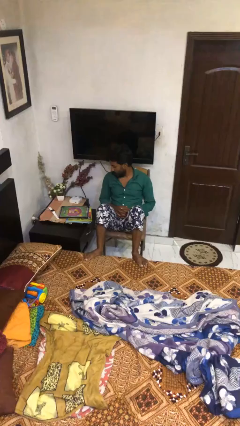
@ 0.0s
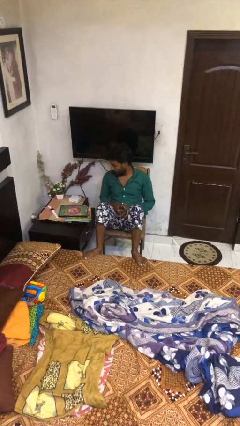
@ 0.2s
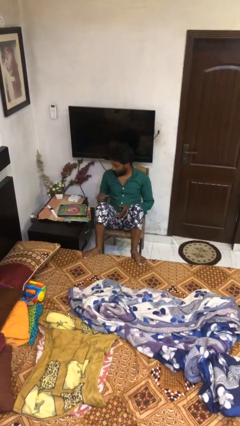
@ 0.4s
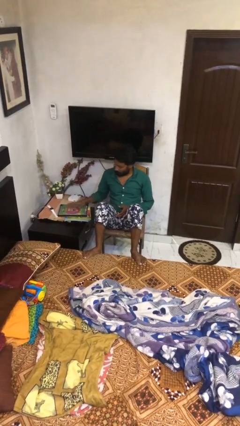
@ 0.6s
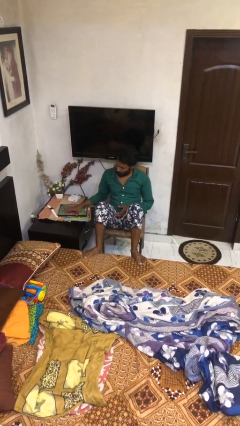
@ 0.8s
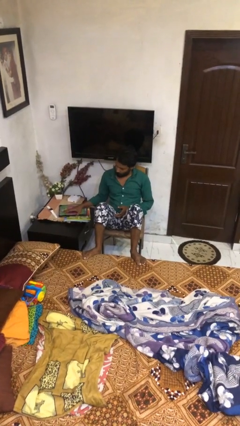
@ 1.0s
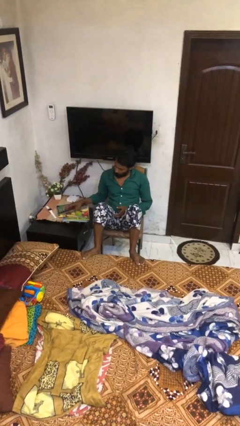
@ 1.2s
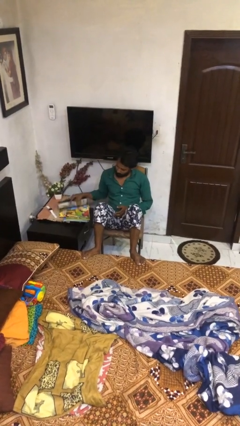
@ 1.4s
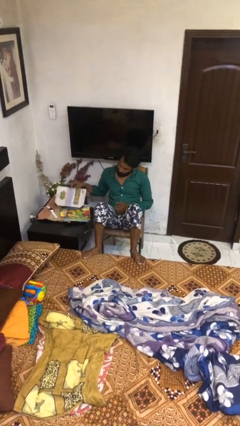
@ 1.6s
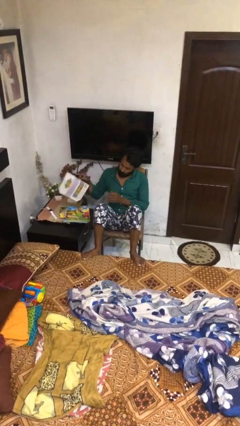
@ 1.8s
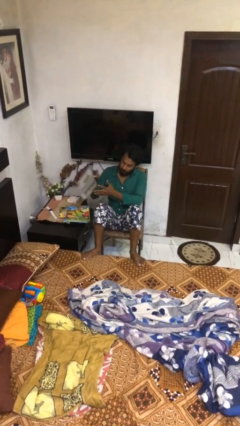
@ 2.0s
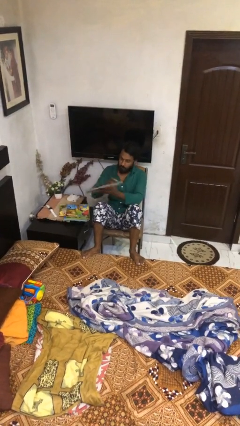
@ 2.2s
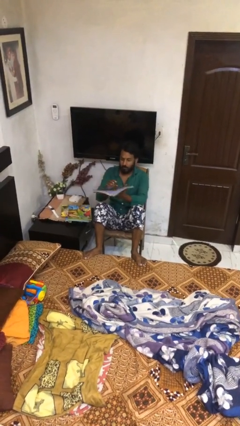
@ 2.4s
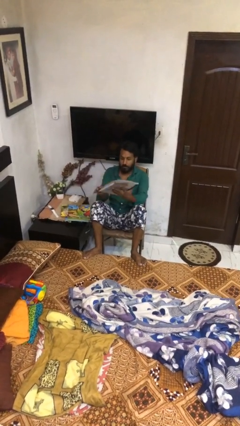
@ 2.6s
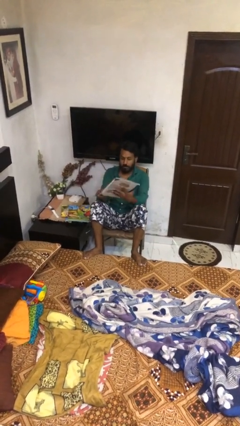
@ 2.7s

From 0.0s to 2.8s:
person picks up object from table

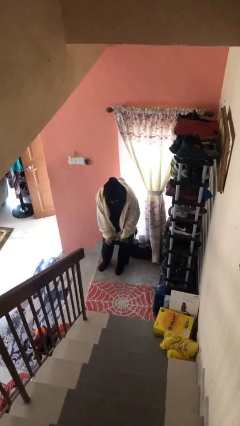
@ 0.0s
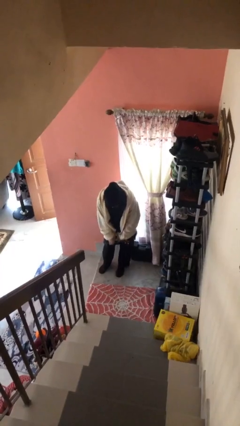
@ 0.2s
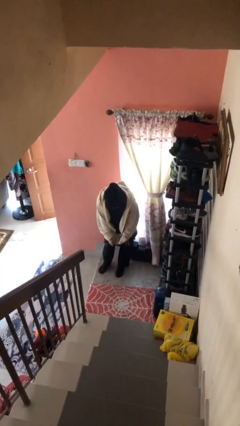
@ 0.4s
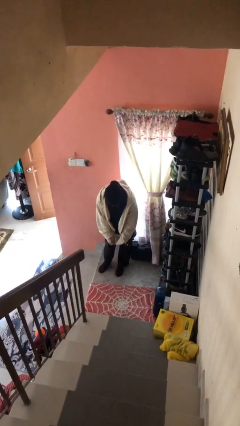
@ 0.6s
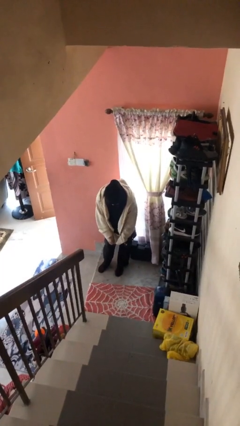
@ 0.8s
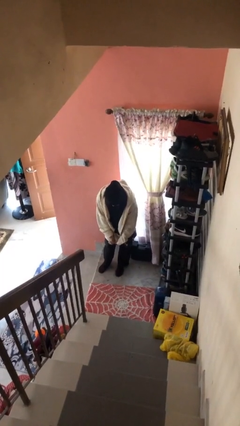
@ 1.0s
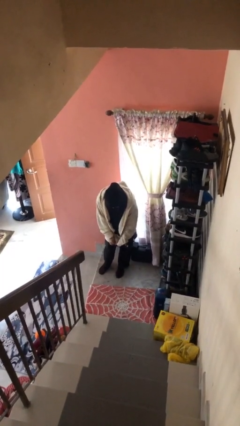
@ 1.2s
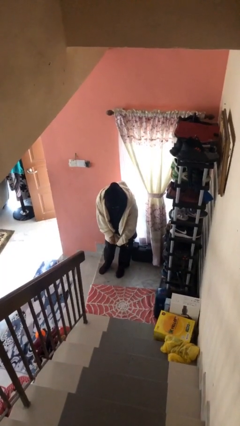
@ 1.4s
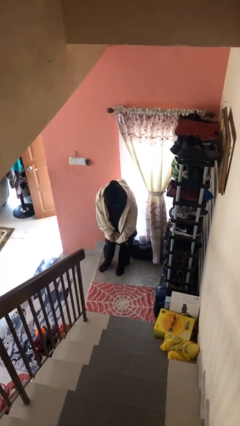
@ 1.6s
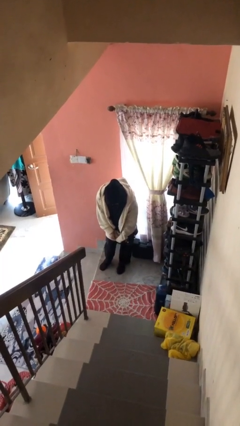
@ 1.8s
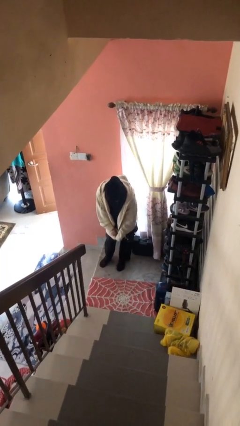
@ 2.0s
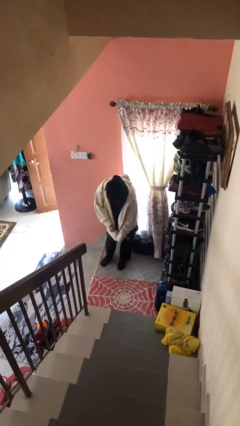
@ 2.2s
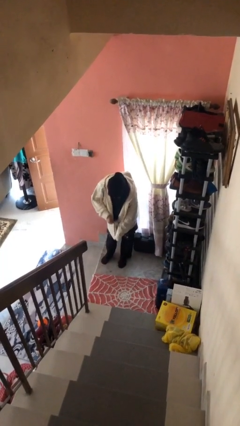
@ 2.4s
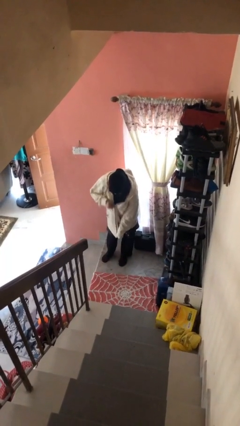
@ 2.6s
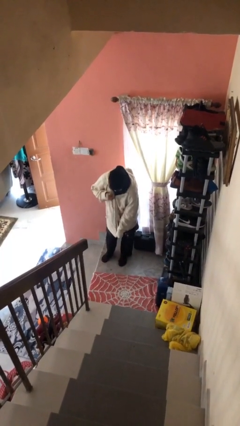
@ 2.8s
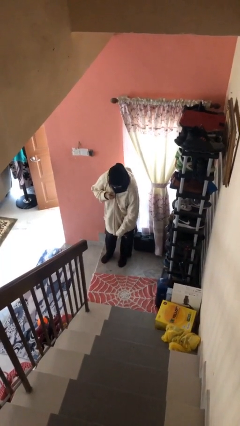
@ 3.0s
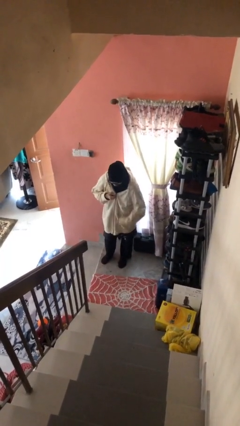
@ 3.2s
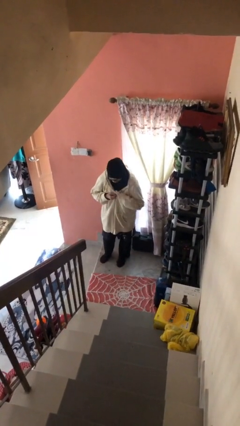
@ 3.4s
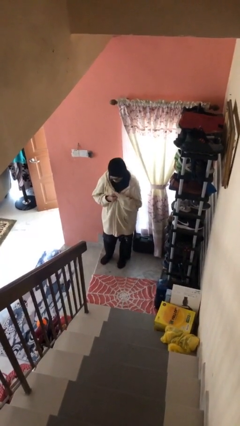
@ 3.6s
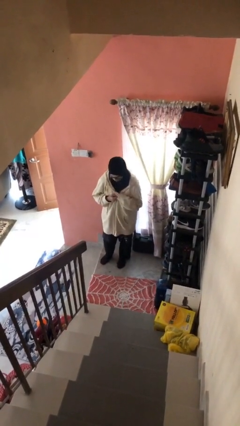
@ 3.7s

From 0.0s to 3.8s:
person zips up jacket

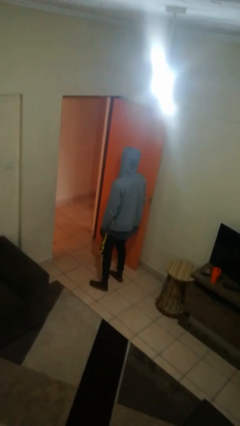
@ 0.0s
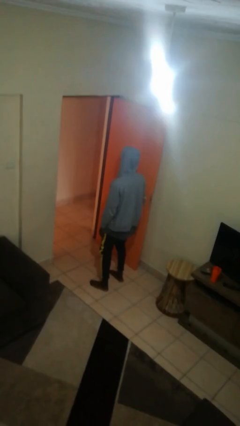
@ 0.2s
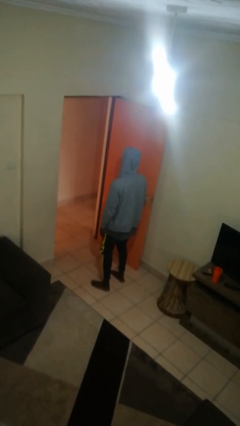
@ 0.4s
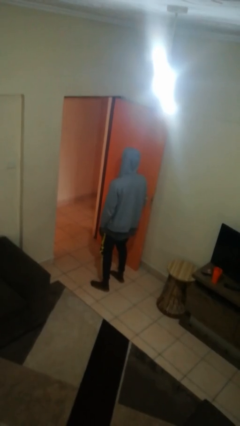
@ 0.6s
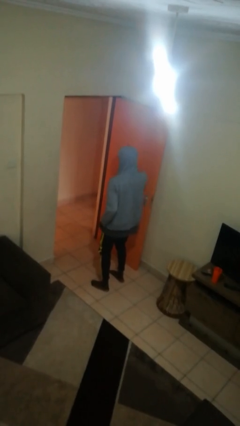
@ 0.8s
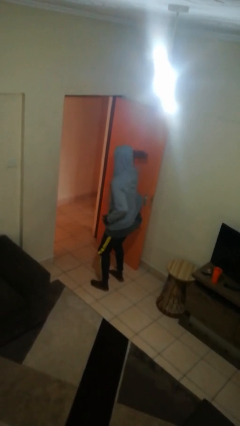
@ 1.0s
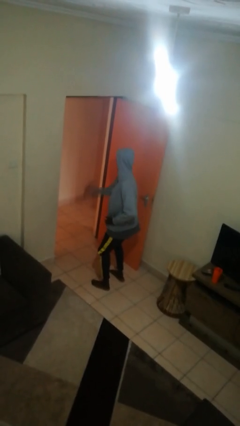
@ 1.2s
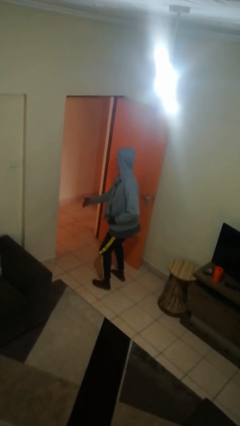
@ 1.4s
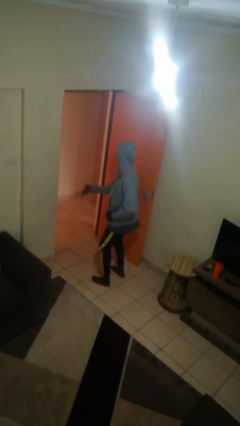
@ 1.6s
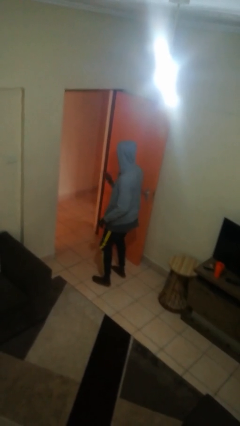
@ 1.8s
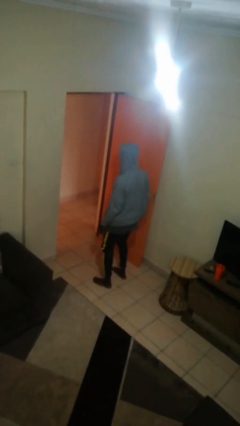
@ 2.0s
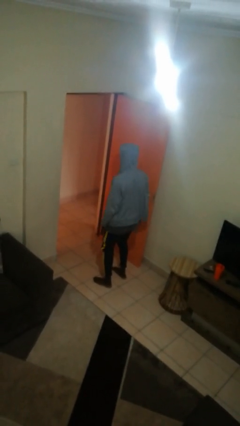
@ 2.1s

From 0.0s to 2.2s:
person karate chop

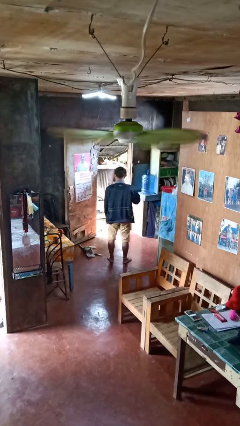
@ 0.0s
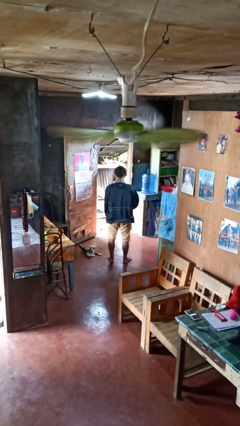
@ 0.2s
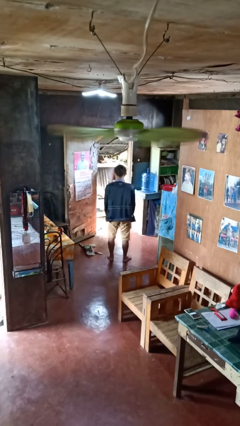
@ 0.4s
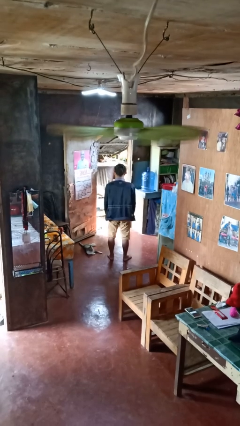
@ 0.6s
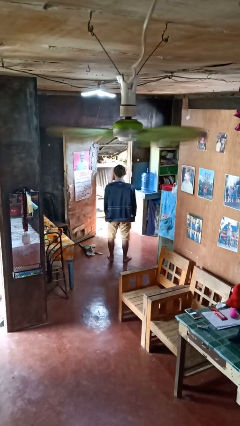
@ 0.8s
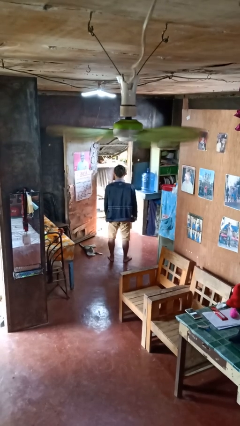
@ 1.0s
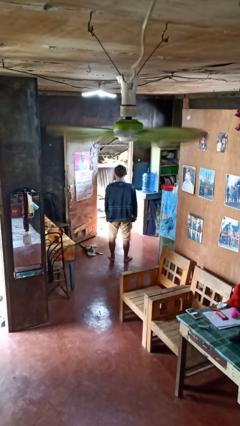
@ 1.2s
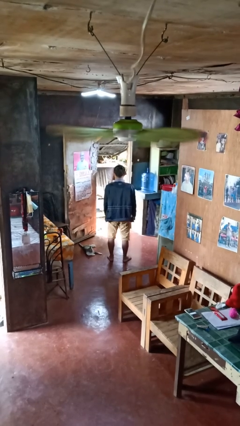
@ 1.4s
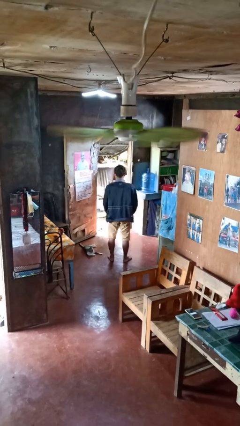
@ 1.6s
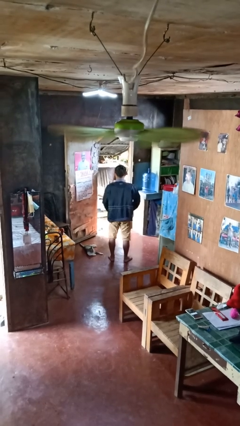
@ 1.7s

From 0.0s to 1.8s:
person unzips jacket

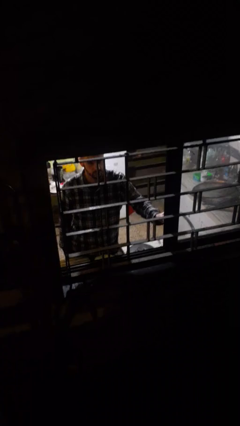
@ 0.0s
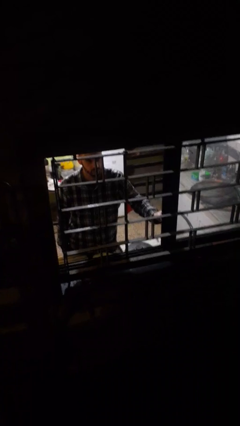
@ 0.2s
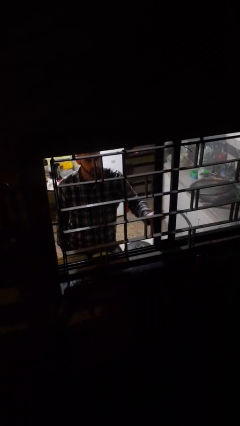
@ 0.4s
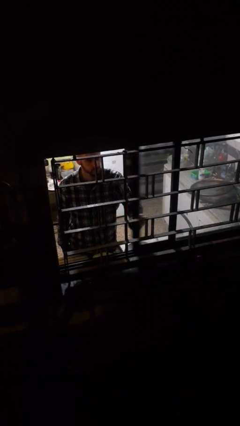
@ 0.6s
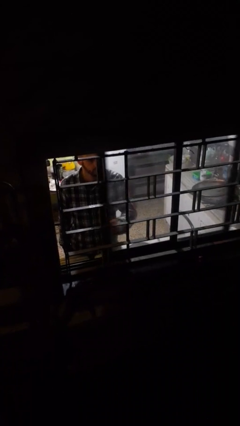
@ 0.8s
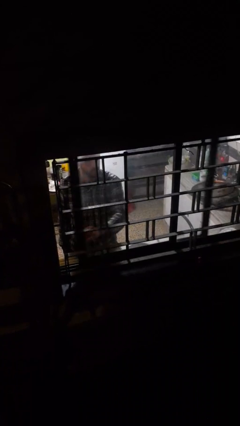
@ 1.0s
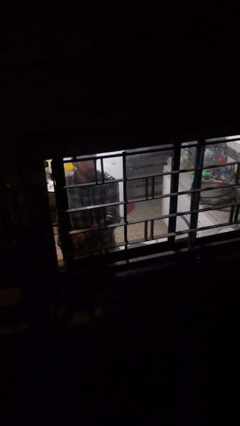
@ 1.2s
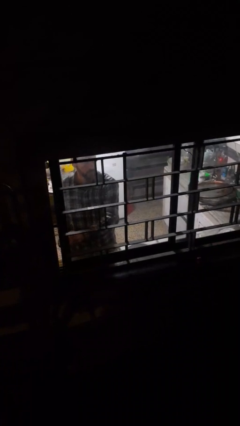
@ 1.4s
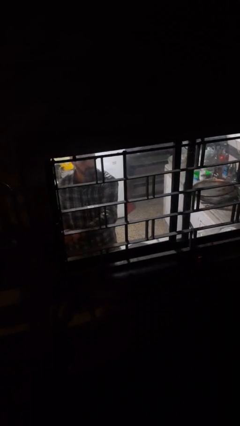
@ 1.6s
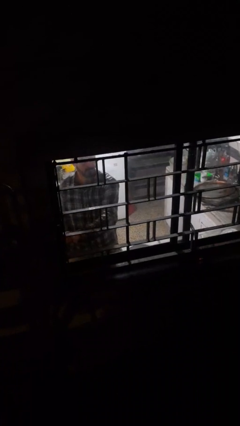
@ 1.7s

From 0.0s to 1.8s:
person closes home window

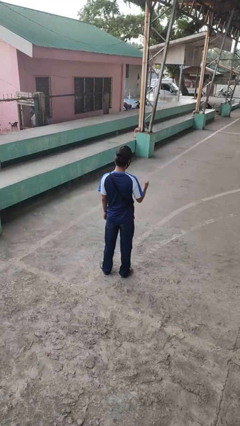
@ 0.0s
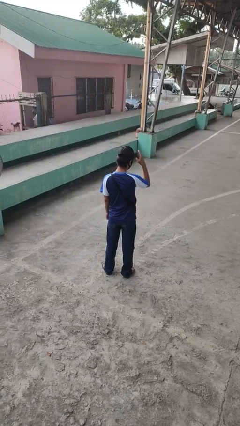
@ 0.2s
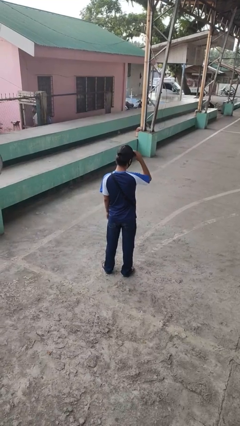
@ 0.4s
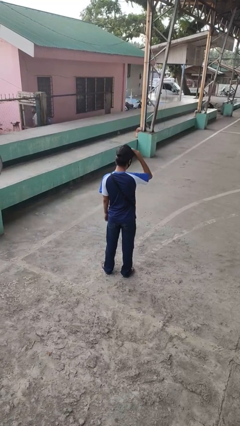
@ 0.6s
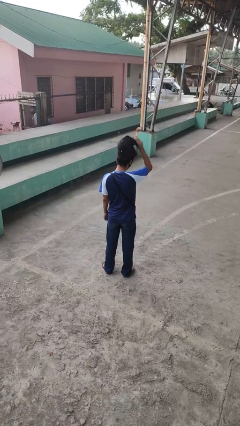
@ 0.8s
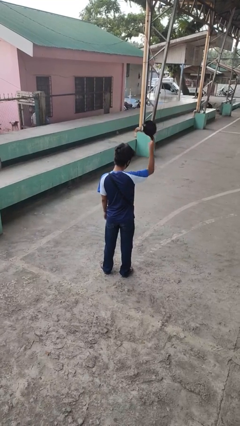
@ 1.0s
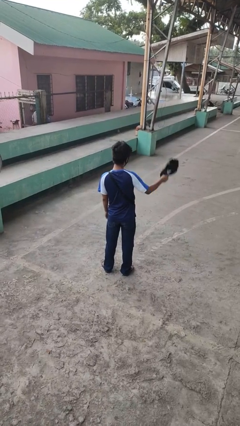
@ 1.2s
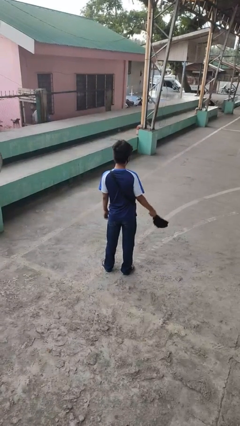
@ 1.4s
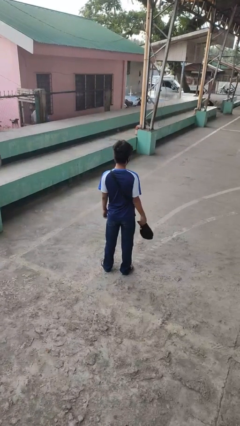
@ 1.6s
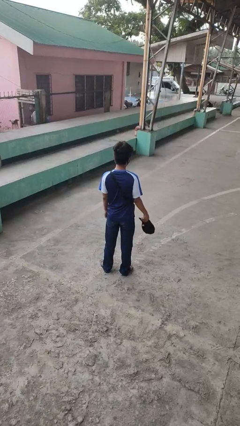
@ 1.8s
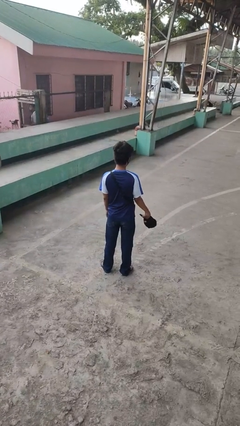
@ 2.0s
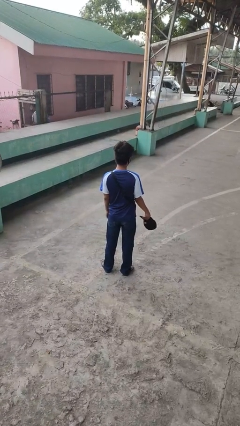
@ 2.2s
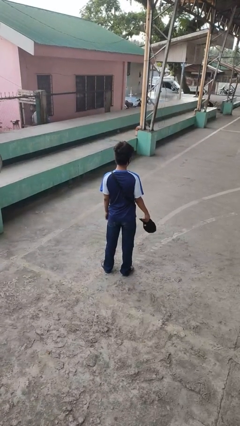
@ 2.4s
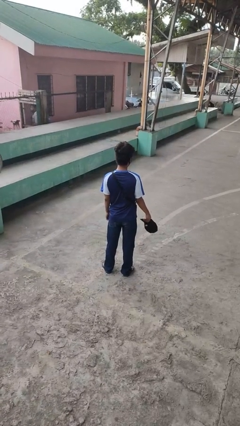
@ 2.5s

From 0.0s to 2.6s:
person takes off hat

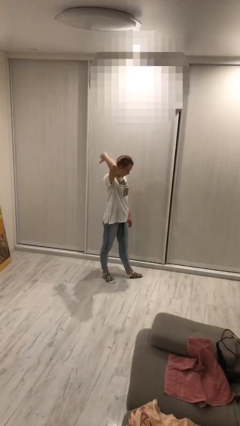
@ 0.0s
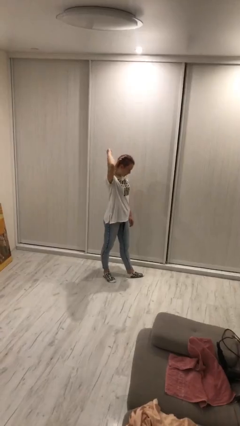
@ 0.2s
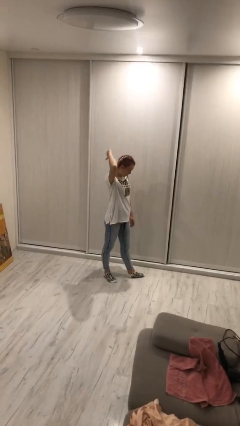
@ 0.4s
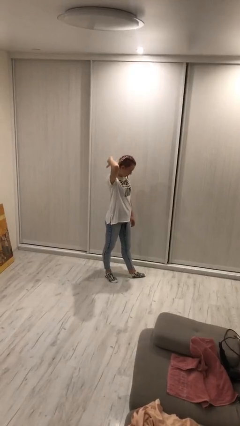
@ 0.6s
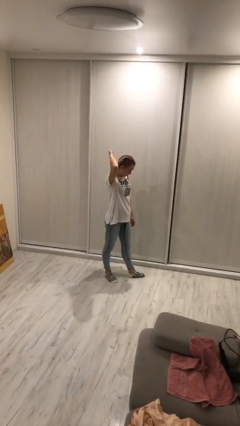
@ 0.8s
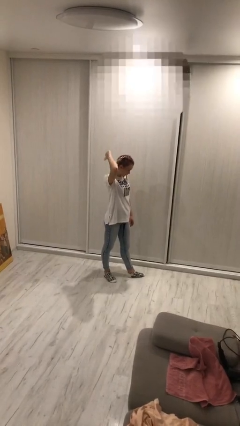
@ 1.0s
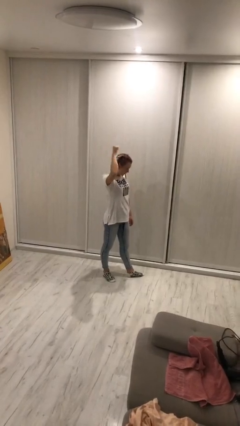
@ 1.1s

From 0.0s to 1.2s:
person gestures behind me

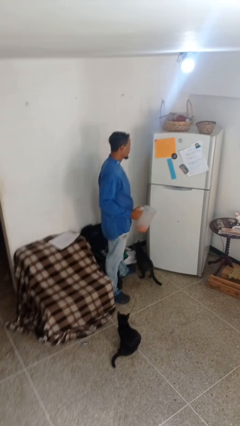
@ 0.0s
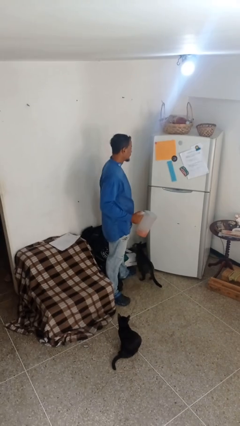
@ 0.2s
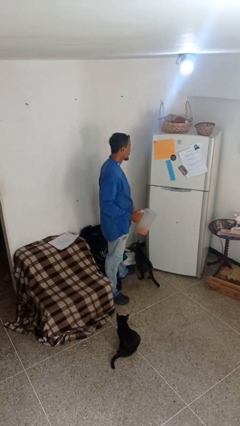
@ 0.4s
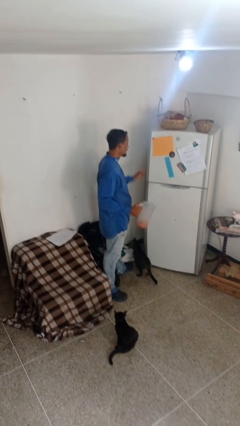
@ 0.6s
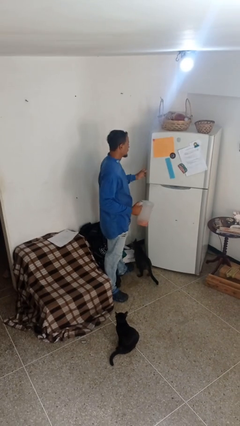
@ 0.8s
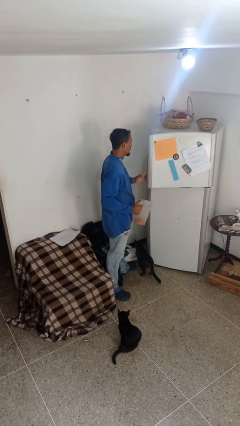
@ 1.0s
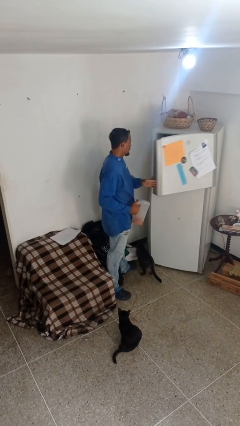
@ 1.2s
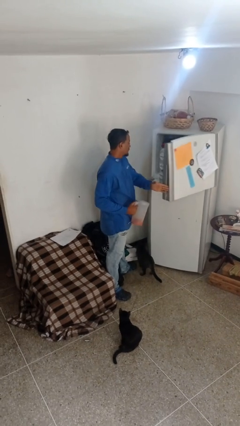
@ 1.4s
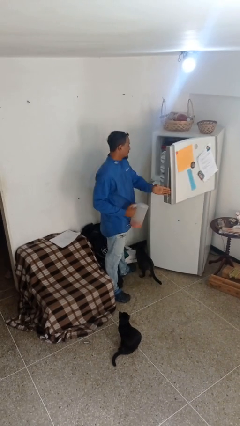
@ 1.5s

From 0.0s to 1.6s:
person opens refrigerator
